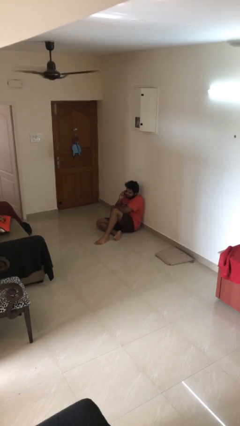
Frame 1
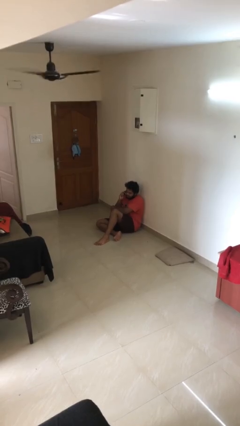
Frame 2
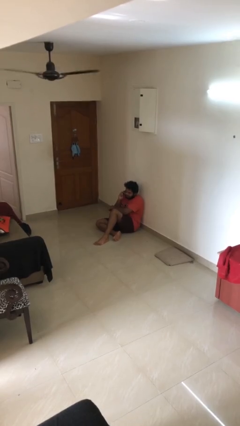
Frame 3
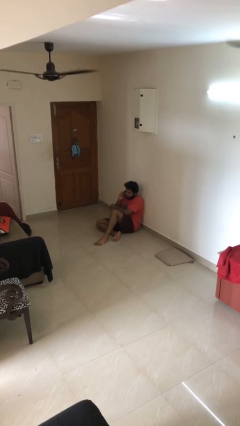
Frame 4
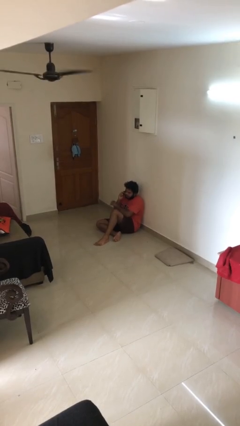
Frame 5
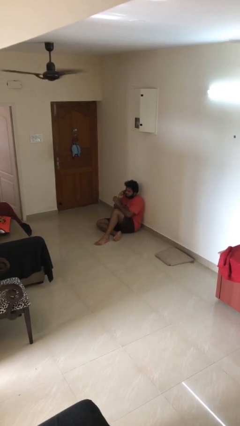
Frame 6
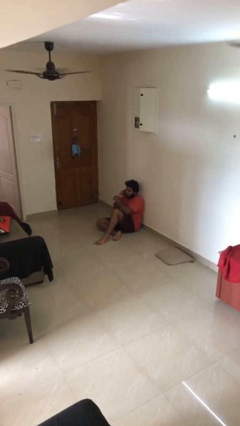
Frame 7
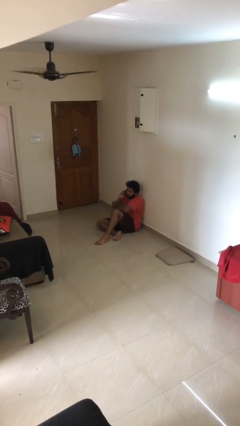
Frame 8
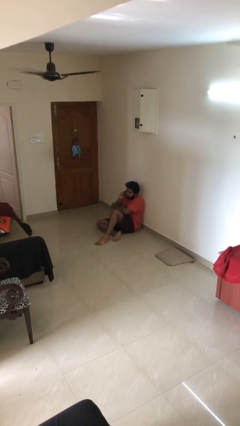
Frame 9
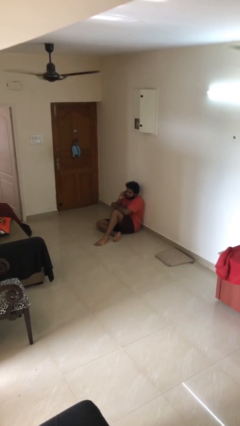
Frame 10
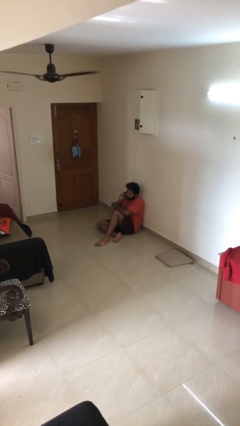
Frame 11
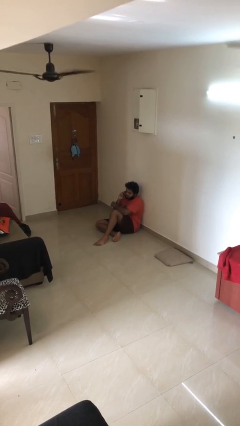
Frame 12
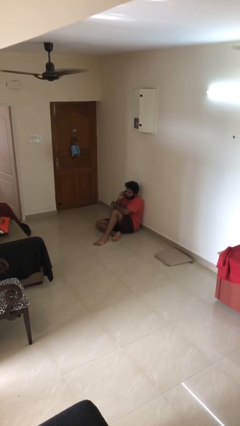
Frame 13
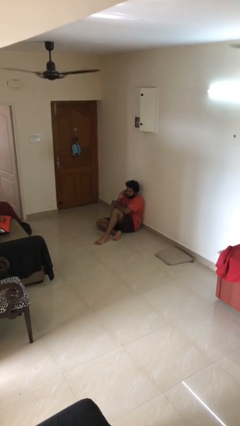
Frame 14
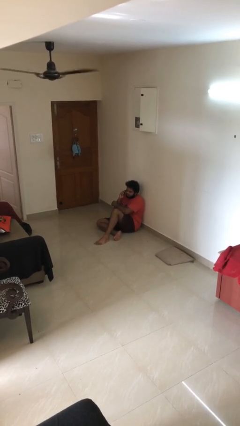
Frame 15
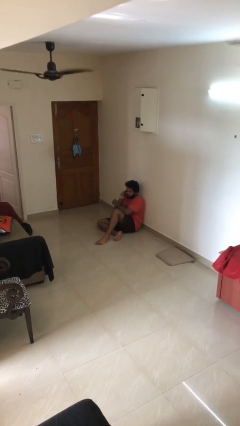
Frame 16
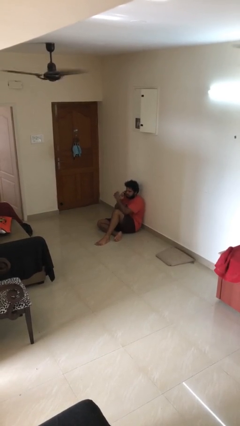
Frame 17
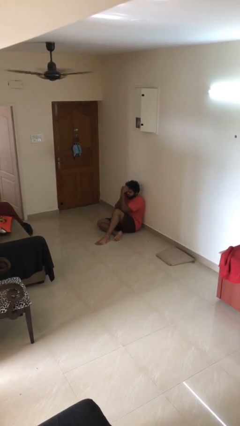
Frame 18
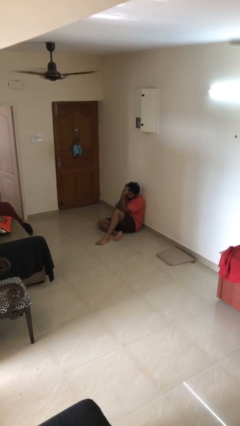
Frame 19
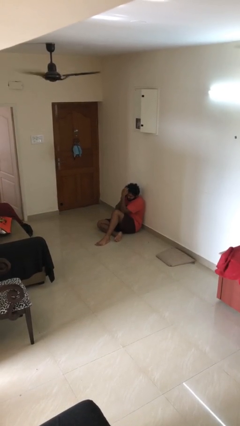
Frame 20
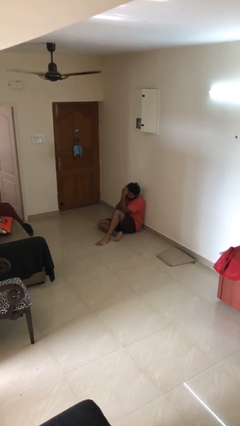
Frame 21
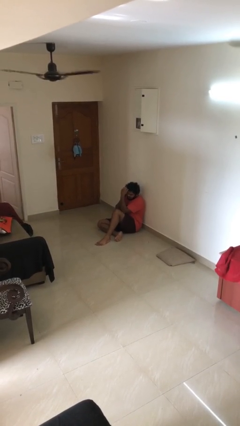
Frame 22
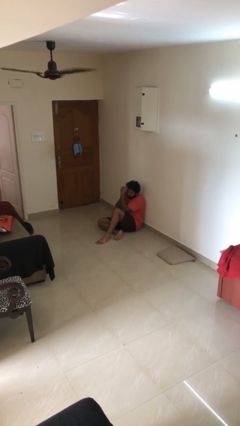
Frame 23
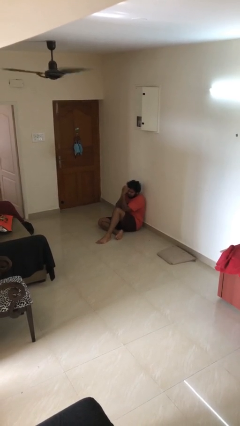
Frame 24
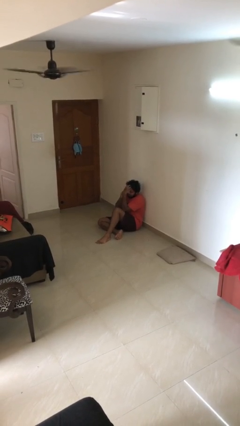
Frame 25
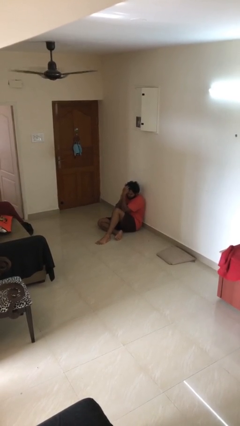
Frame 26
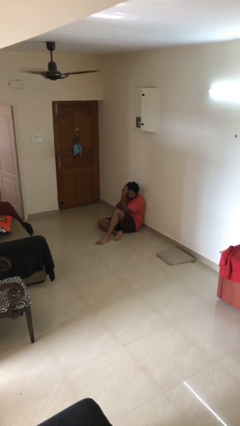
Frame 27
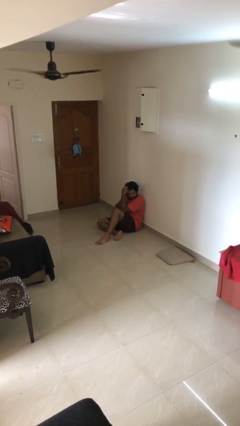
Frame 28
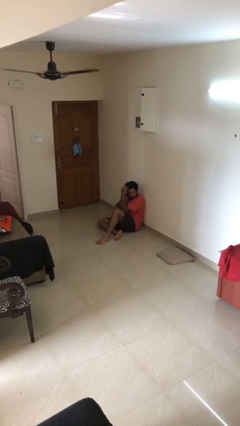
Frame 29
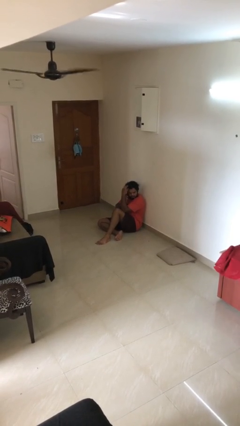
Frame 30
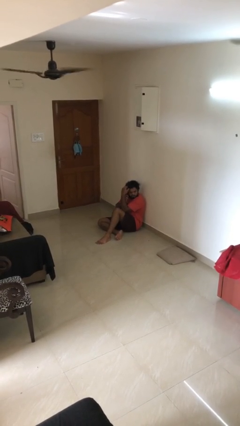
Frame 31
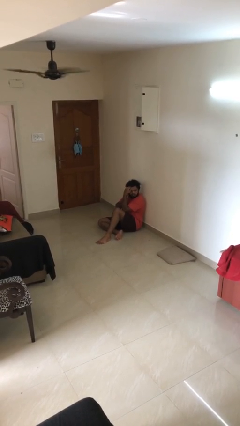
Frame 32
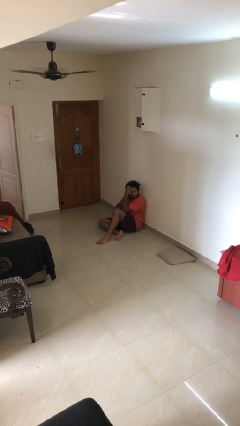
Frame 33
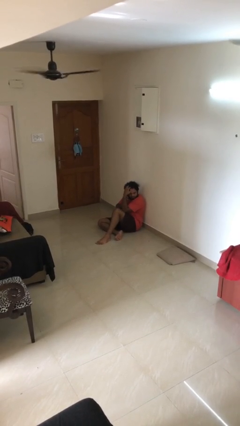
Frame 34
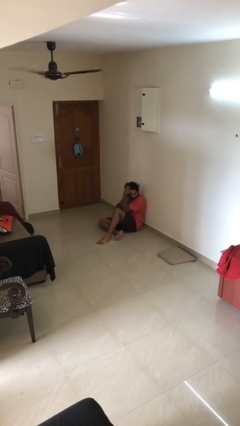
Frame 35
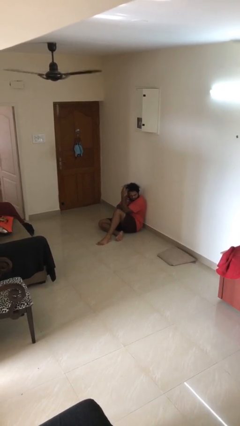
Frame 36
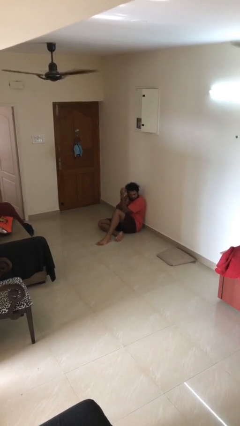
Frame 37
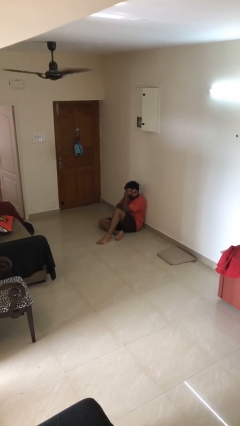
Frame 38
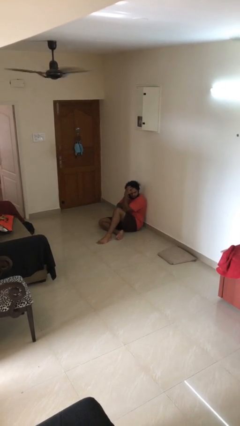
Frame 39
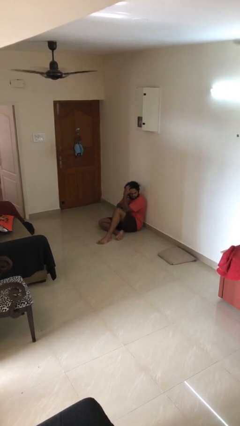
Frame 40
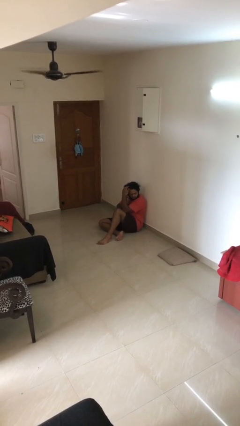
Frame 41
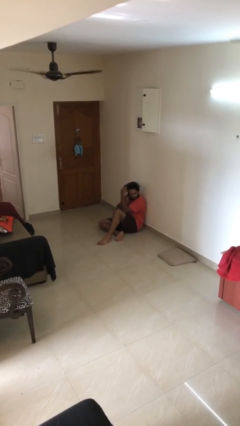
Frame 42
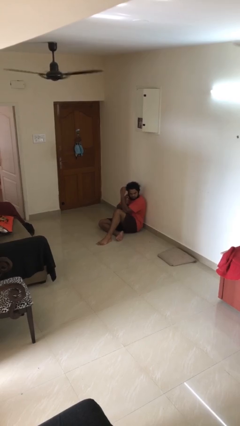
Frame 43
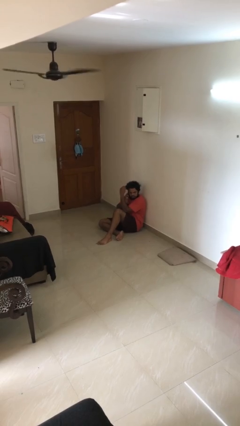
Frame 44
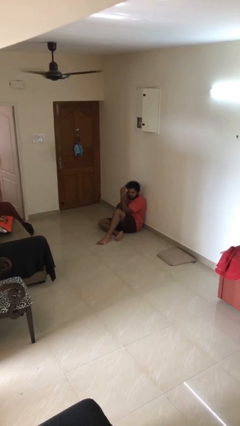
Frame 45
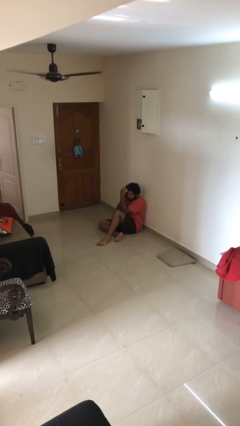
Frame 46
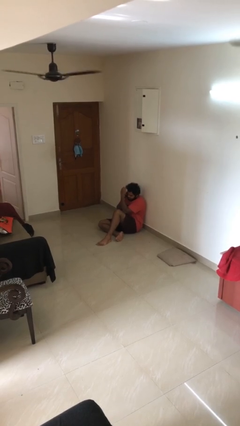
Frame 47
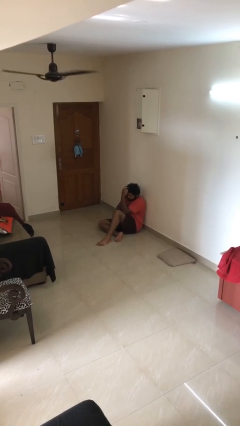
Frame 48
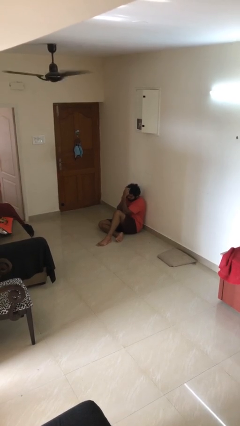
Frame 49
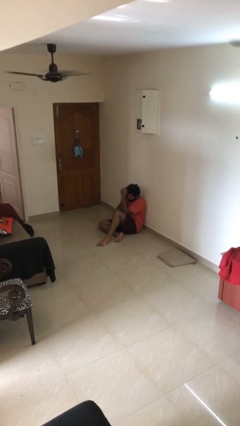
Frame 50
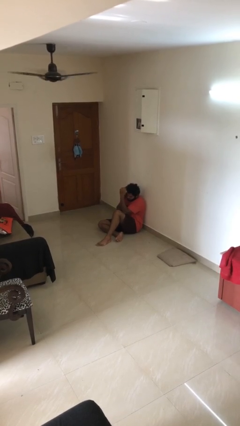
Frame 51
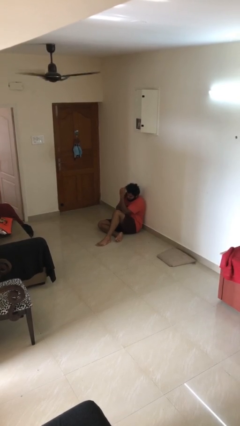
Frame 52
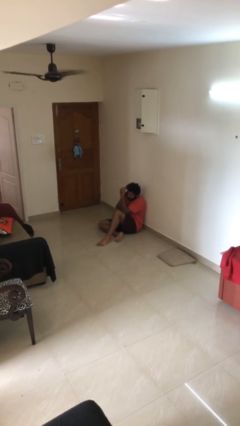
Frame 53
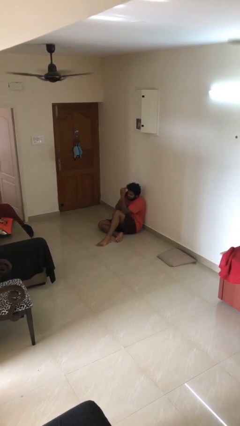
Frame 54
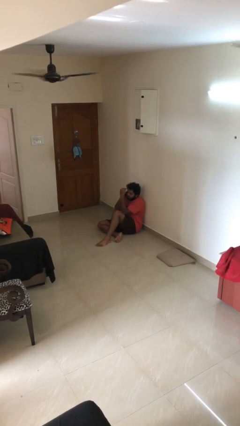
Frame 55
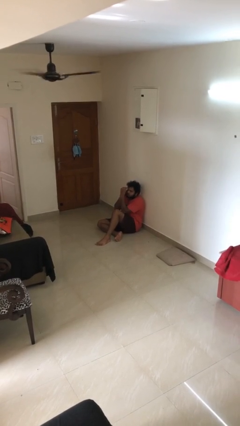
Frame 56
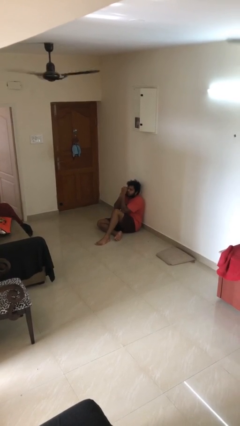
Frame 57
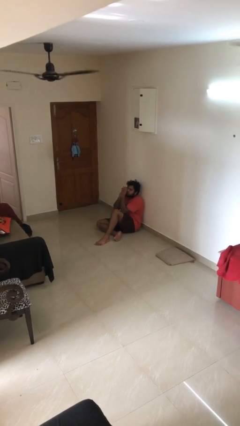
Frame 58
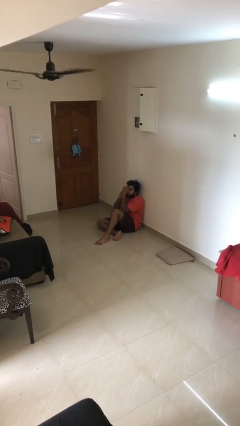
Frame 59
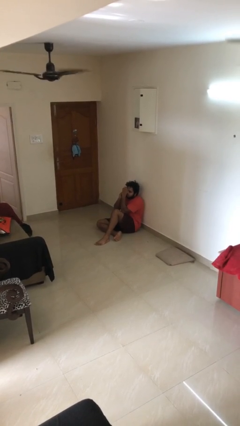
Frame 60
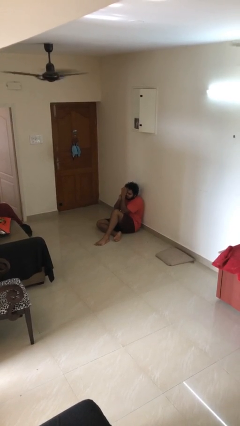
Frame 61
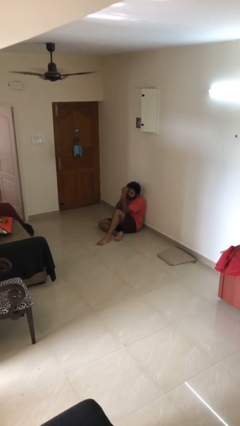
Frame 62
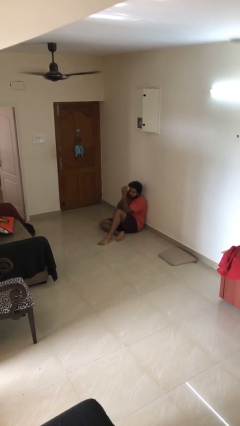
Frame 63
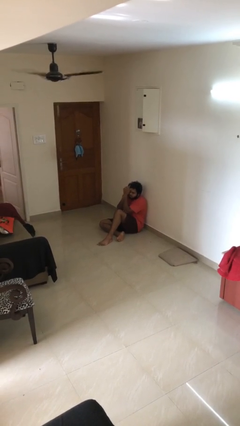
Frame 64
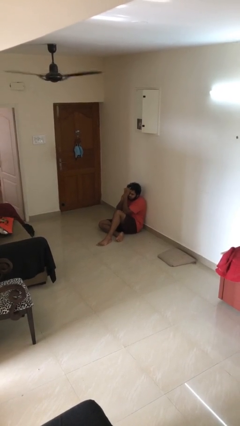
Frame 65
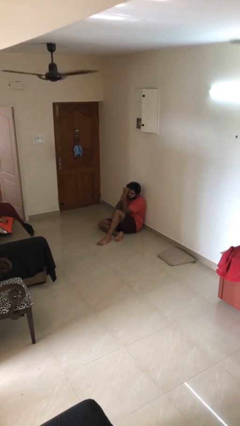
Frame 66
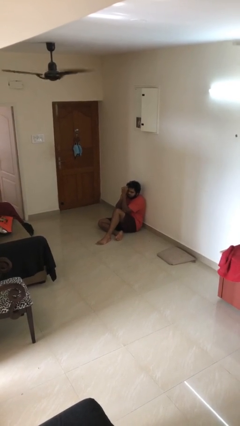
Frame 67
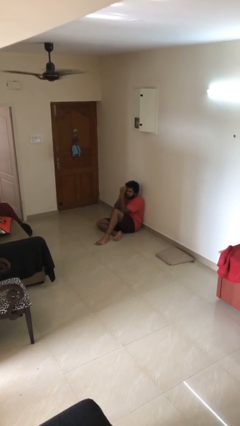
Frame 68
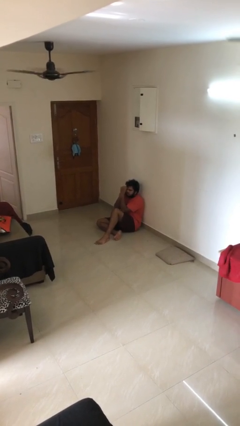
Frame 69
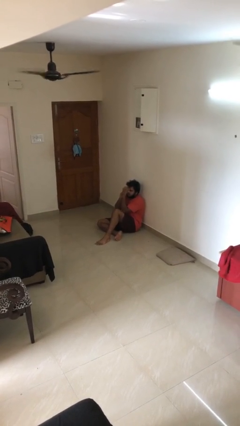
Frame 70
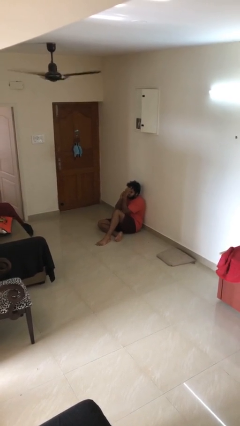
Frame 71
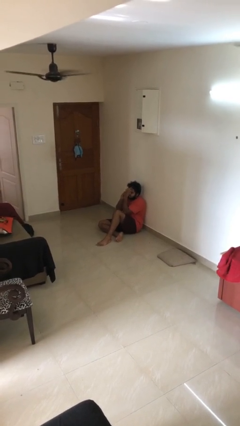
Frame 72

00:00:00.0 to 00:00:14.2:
person talks on phone

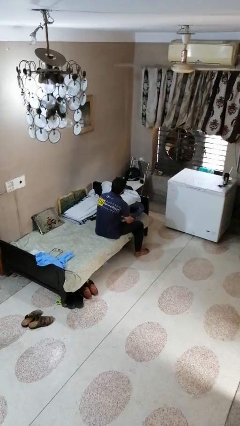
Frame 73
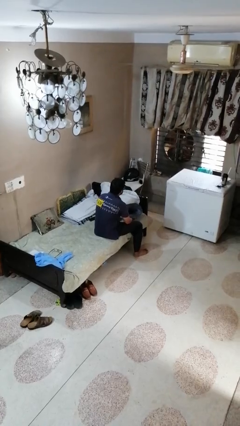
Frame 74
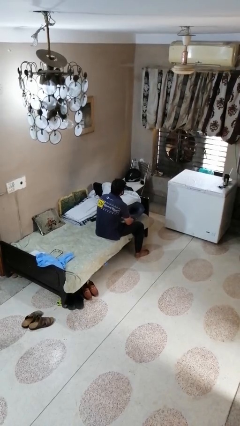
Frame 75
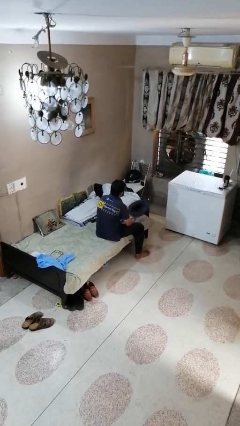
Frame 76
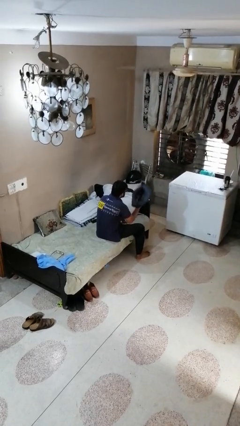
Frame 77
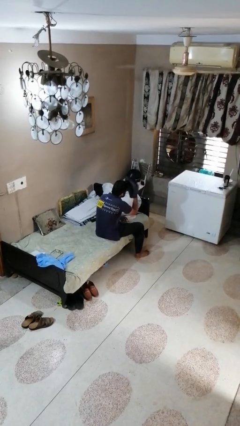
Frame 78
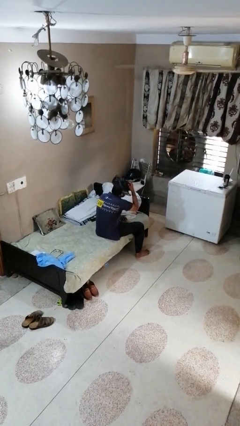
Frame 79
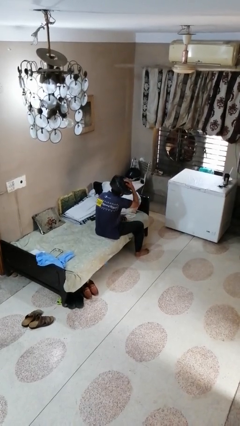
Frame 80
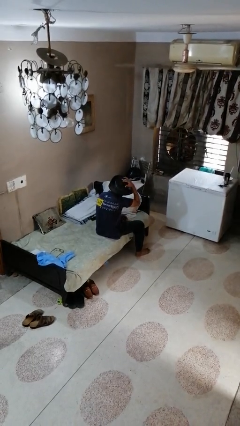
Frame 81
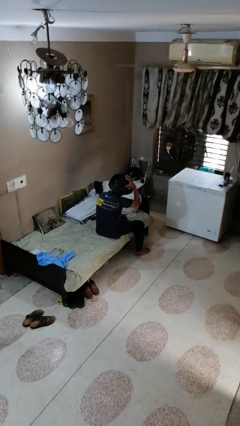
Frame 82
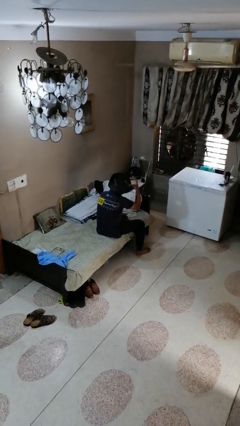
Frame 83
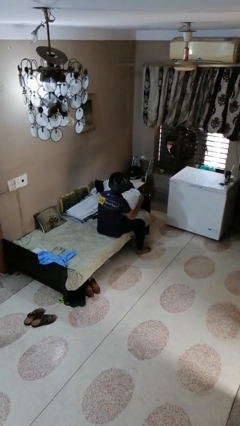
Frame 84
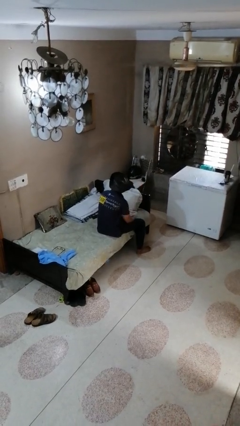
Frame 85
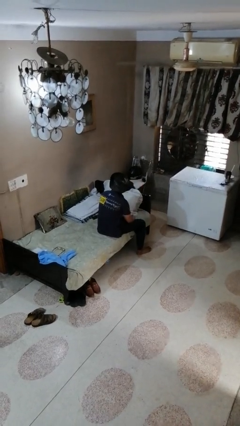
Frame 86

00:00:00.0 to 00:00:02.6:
person puts on hat

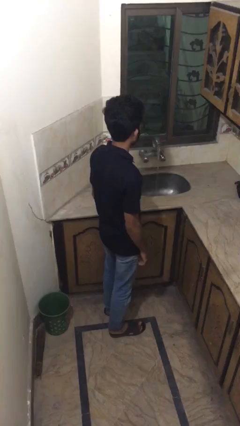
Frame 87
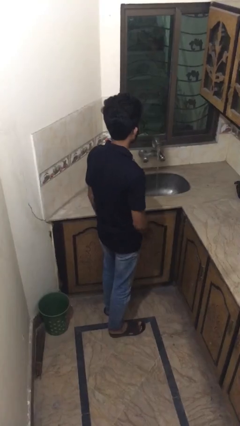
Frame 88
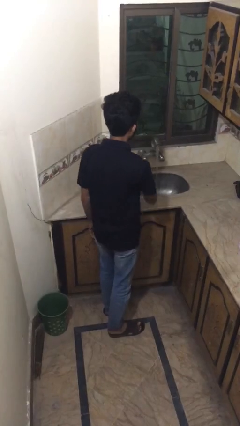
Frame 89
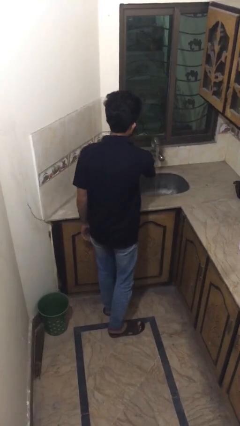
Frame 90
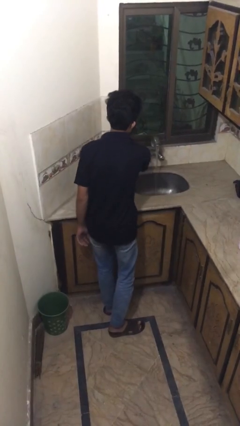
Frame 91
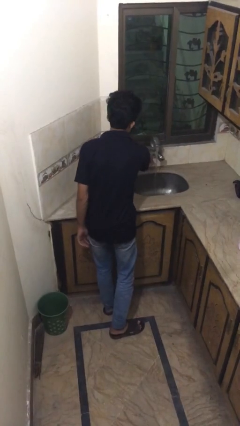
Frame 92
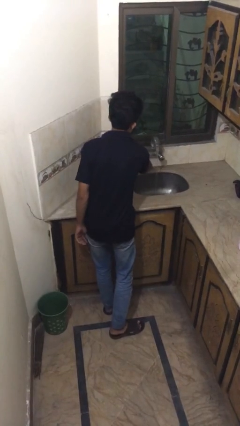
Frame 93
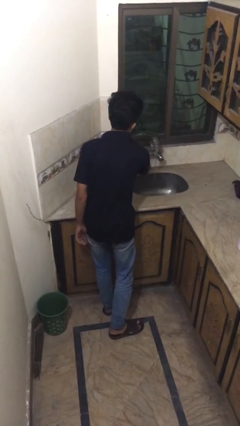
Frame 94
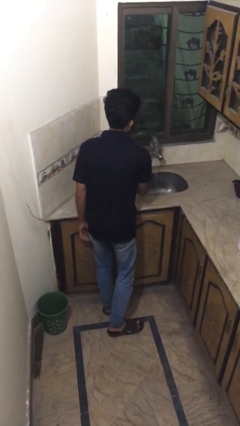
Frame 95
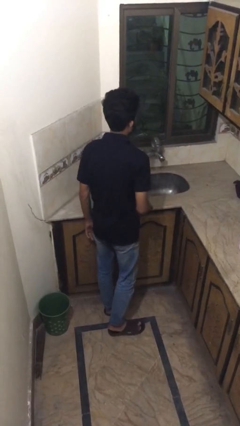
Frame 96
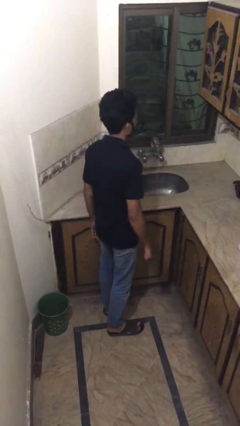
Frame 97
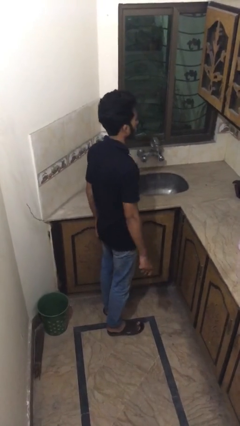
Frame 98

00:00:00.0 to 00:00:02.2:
person turns off faucet
